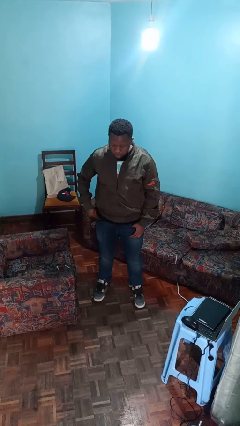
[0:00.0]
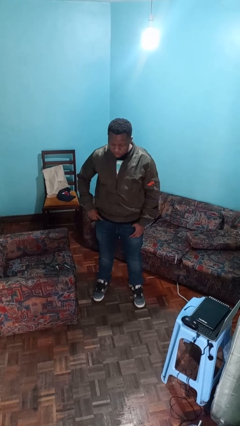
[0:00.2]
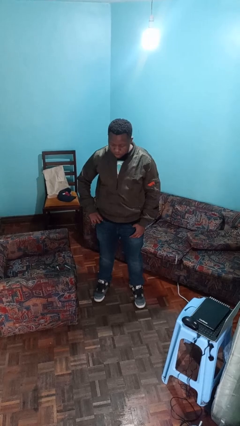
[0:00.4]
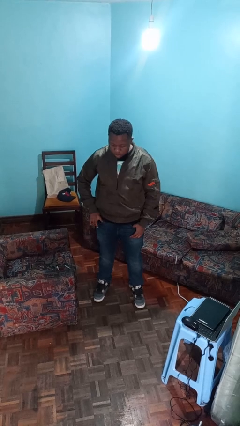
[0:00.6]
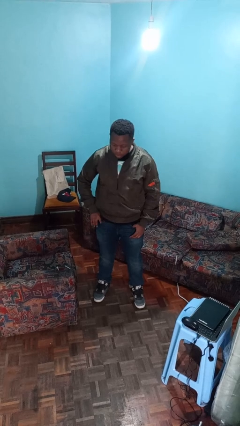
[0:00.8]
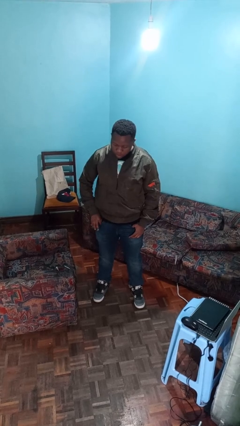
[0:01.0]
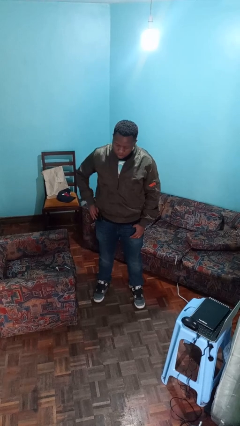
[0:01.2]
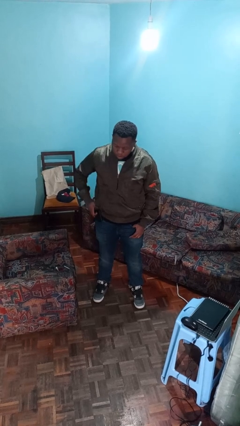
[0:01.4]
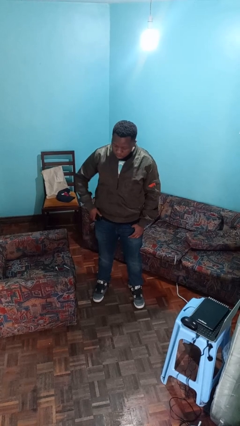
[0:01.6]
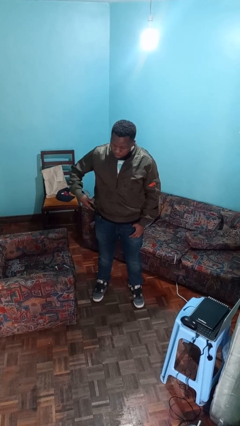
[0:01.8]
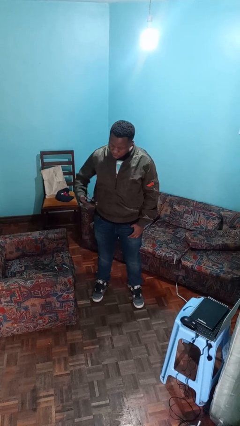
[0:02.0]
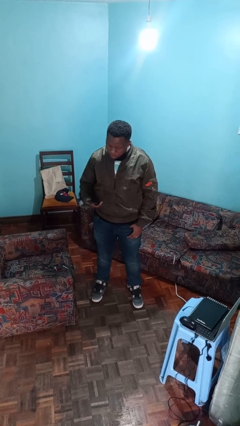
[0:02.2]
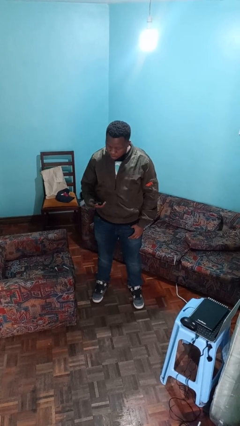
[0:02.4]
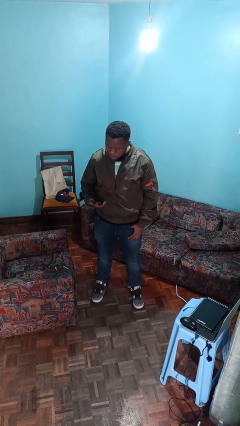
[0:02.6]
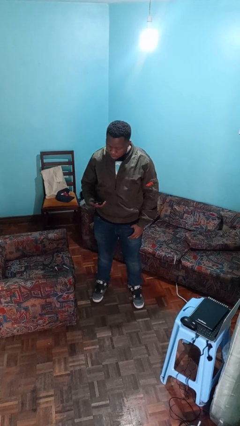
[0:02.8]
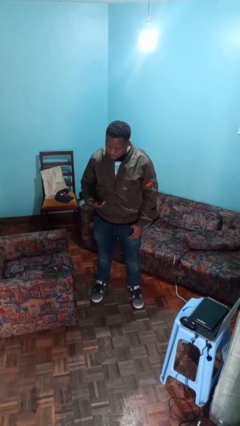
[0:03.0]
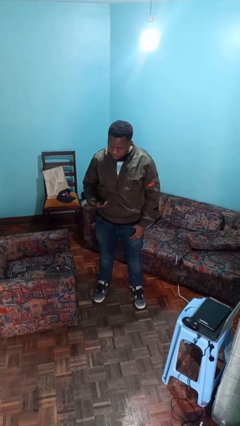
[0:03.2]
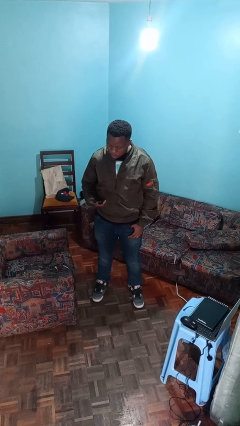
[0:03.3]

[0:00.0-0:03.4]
person takes phone from pocket

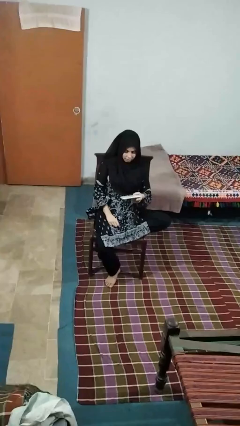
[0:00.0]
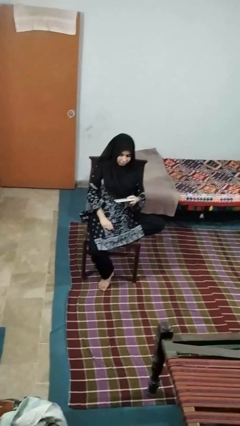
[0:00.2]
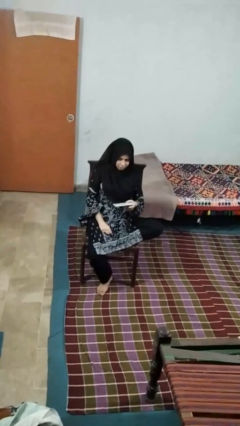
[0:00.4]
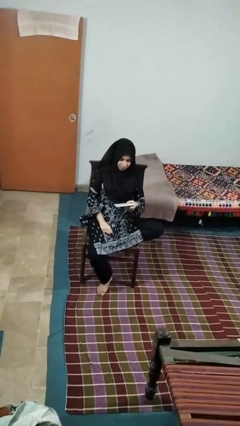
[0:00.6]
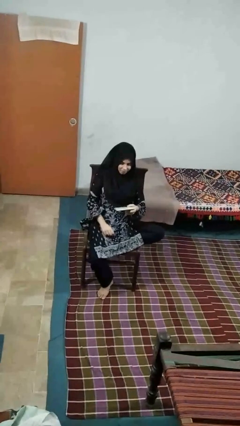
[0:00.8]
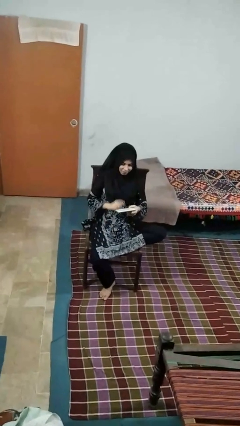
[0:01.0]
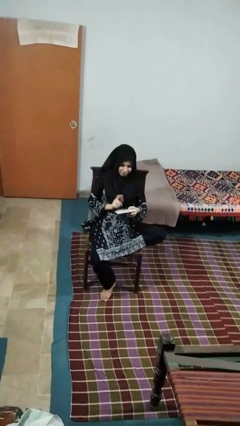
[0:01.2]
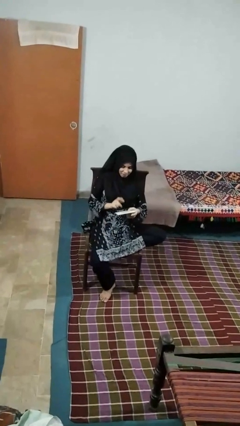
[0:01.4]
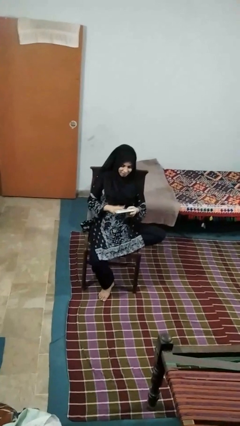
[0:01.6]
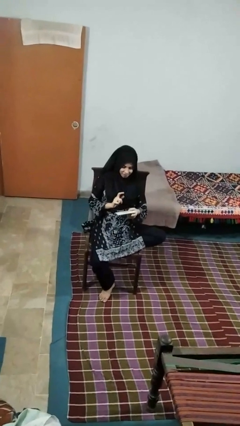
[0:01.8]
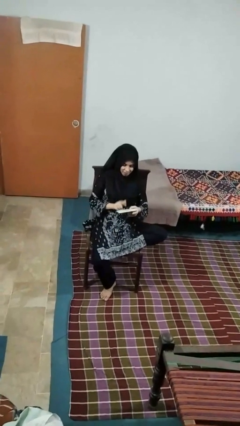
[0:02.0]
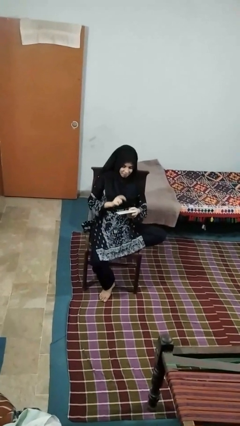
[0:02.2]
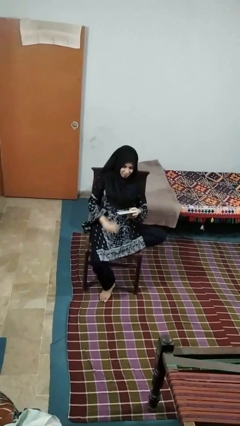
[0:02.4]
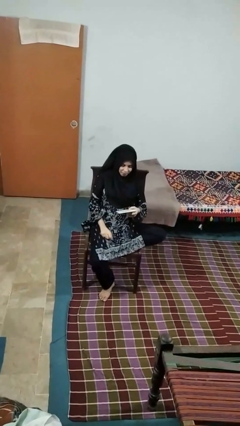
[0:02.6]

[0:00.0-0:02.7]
person taps object with finger

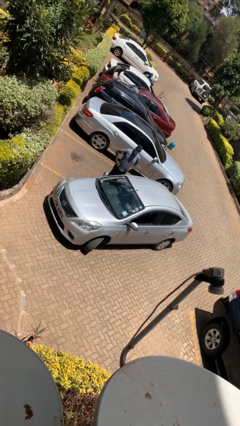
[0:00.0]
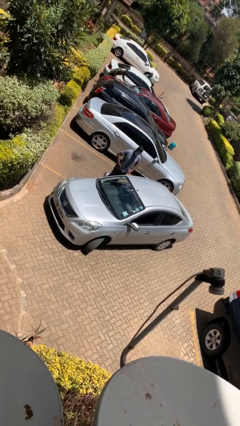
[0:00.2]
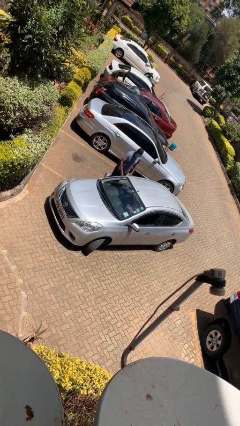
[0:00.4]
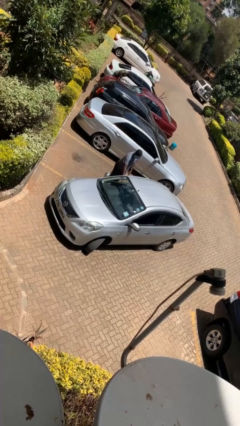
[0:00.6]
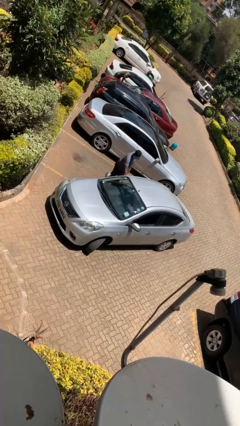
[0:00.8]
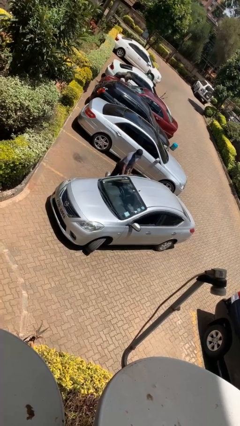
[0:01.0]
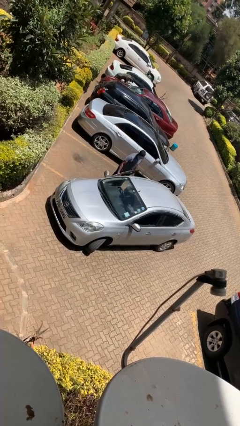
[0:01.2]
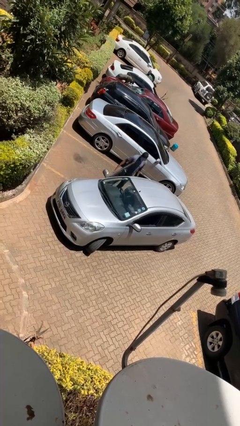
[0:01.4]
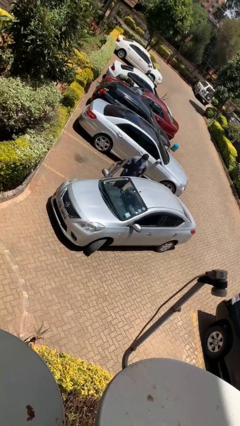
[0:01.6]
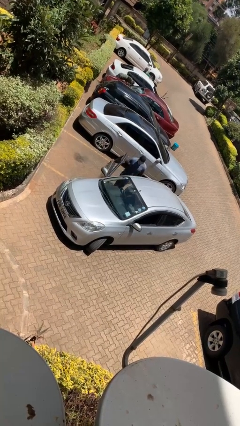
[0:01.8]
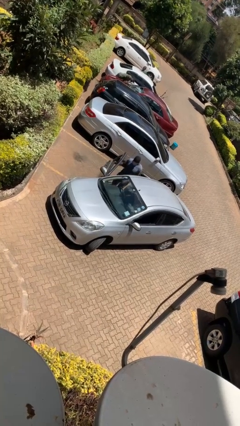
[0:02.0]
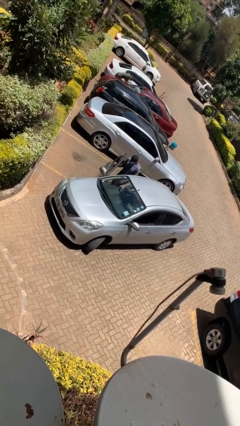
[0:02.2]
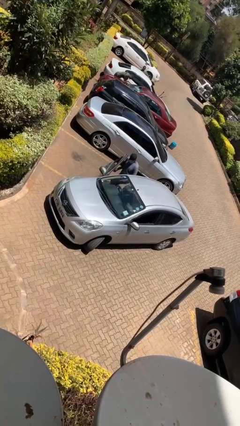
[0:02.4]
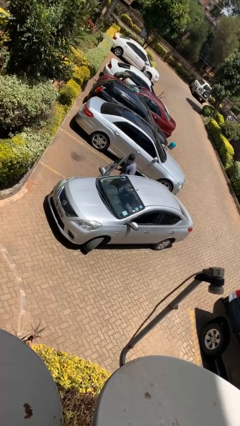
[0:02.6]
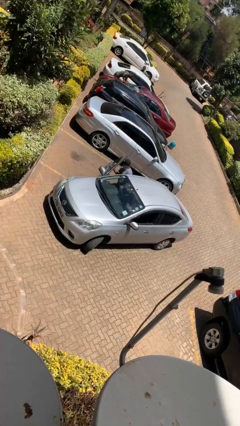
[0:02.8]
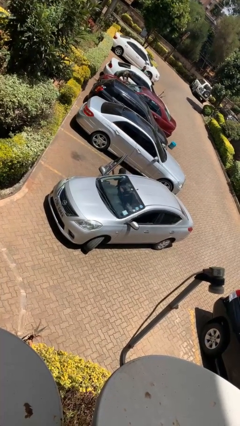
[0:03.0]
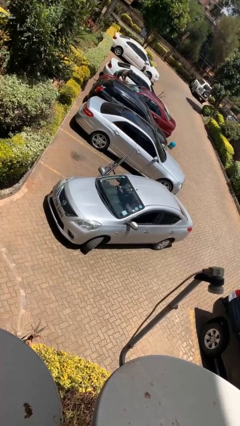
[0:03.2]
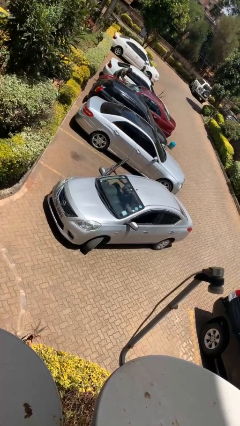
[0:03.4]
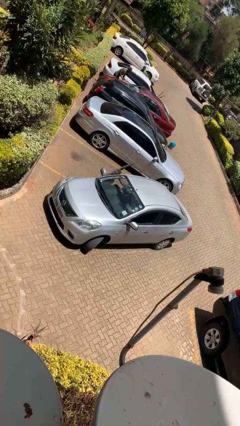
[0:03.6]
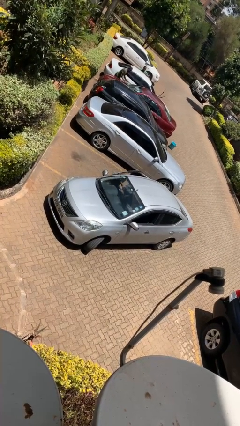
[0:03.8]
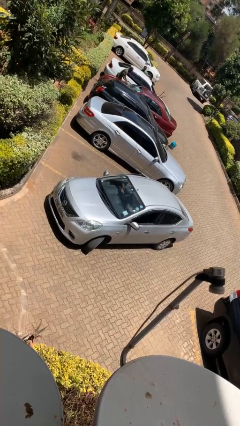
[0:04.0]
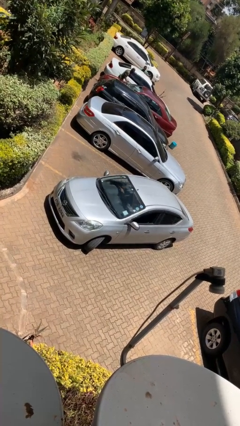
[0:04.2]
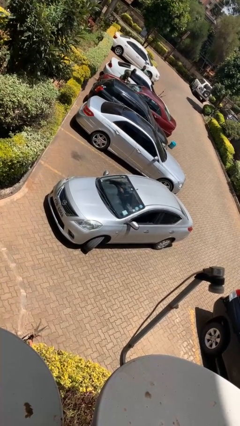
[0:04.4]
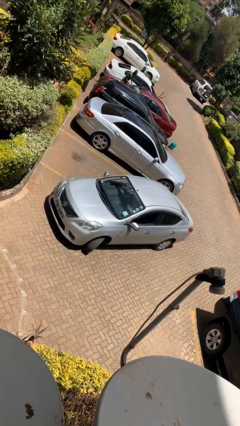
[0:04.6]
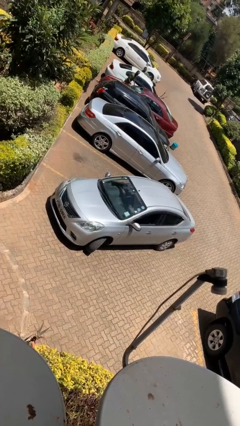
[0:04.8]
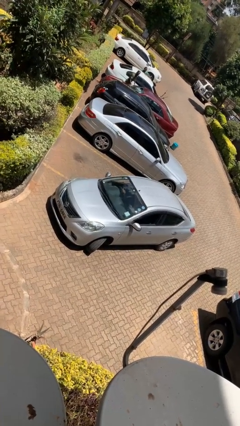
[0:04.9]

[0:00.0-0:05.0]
car picks up person

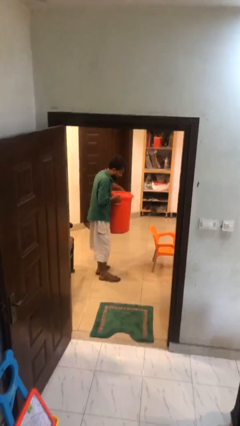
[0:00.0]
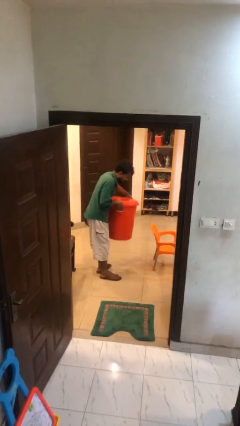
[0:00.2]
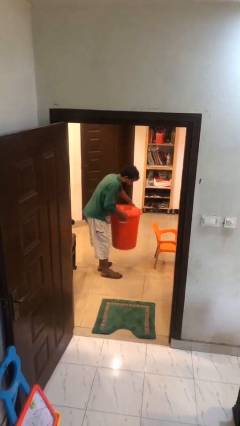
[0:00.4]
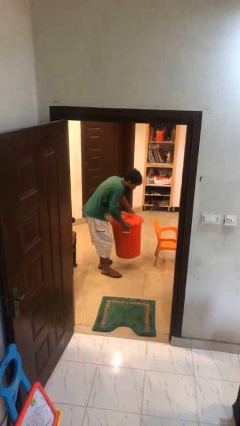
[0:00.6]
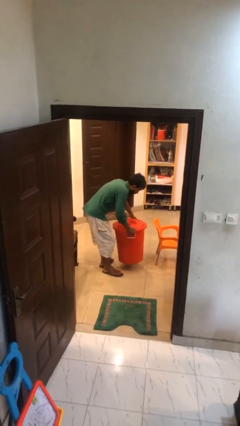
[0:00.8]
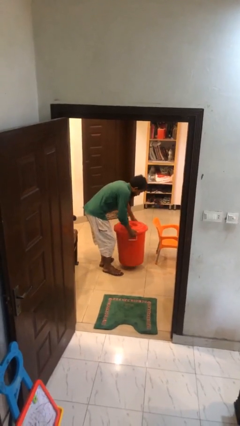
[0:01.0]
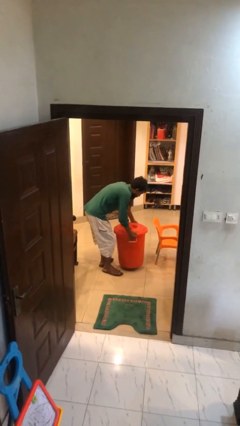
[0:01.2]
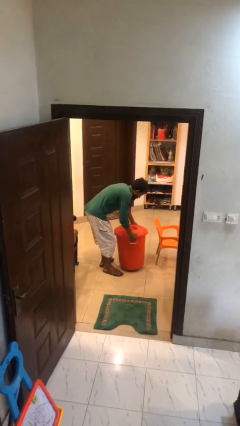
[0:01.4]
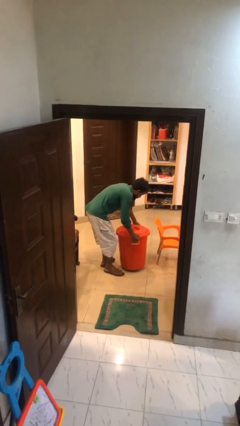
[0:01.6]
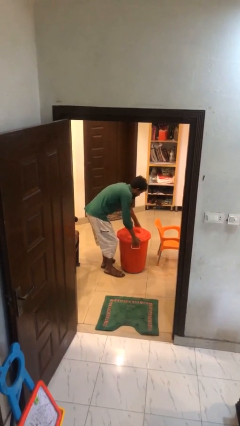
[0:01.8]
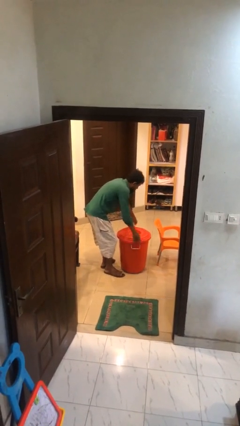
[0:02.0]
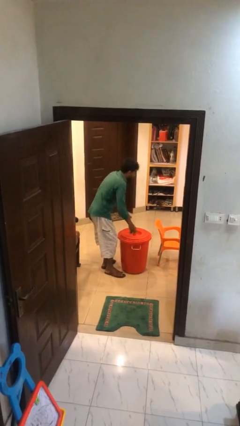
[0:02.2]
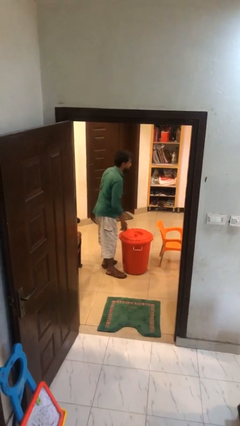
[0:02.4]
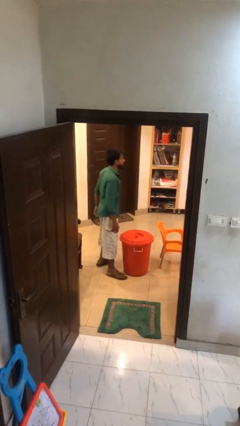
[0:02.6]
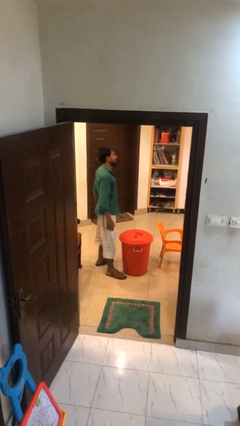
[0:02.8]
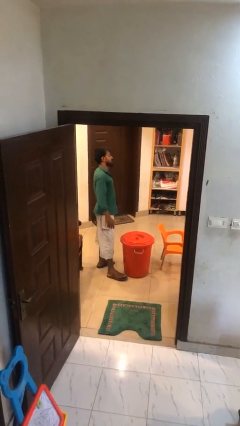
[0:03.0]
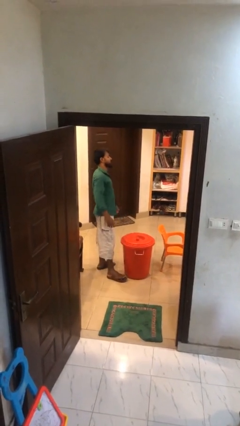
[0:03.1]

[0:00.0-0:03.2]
person puts down object on floor

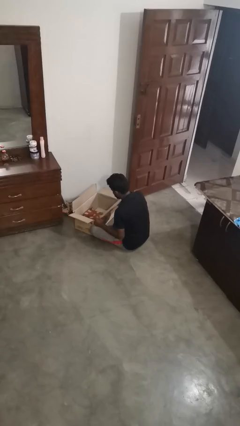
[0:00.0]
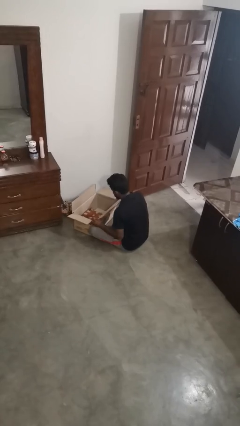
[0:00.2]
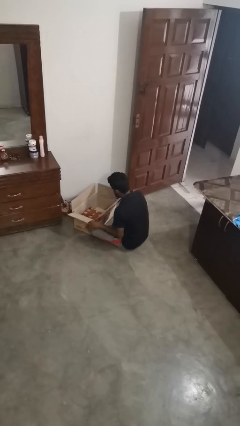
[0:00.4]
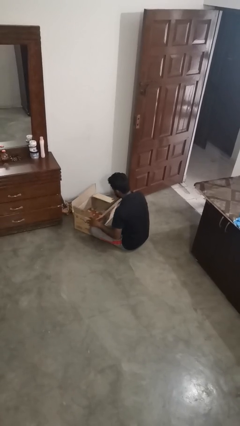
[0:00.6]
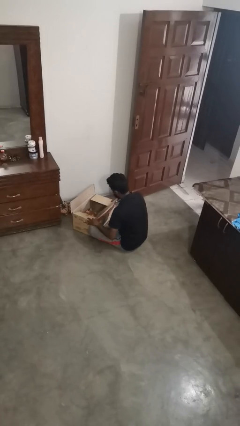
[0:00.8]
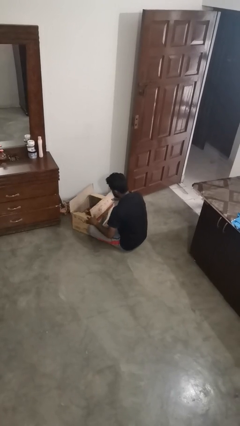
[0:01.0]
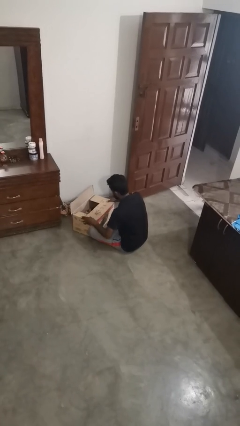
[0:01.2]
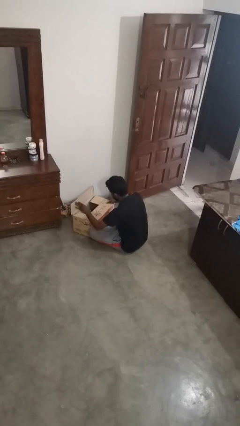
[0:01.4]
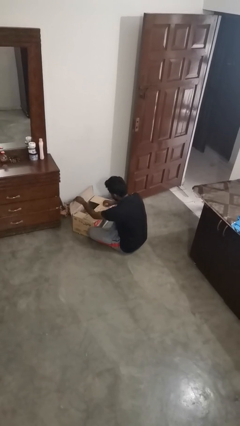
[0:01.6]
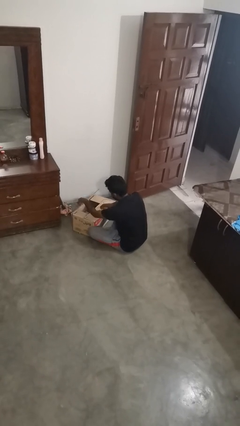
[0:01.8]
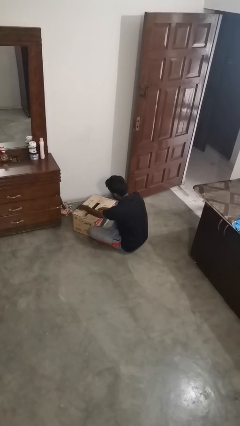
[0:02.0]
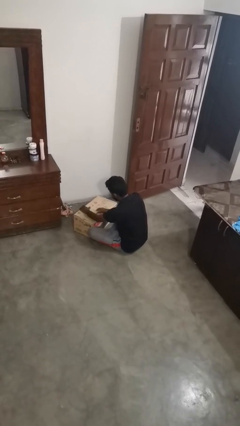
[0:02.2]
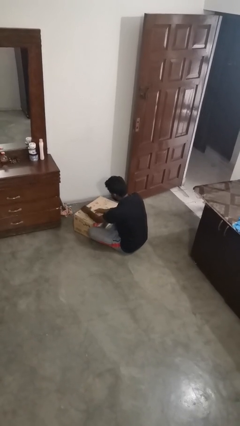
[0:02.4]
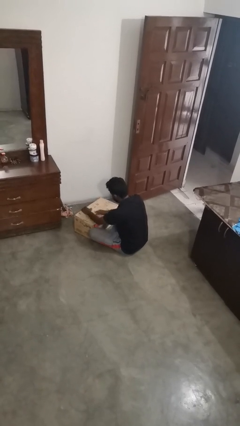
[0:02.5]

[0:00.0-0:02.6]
person closes box

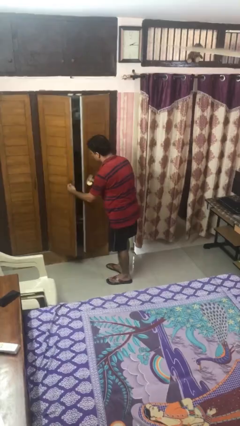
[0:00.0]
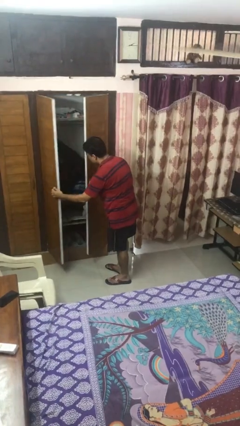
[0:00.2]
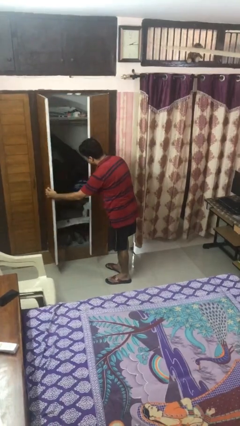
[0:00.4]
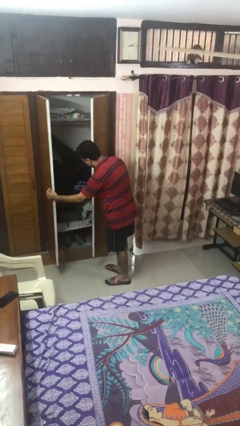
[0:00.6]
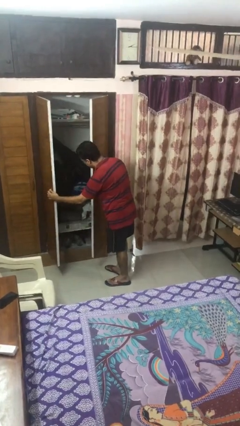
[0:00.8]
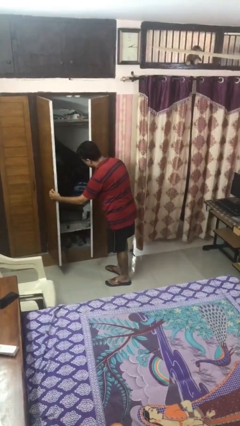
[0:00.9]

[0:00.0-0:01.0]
person opens facility door

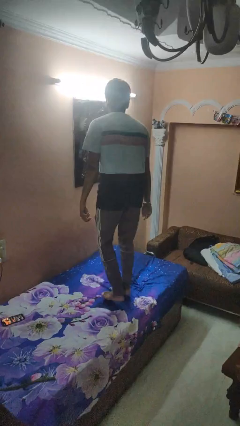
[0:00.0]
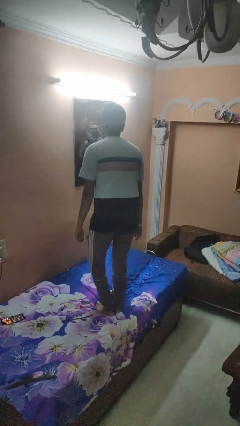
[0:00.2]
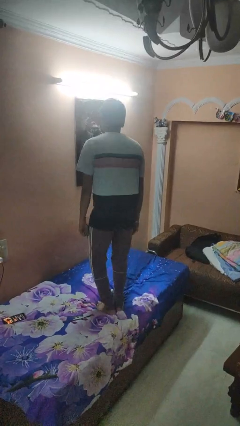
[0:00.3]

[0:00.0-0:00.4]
person jumps on bed
